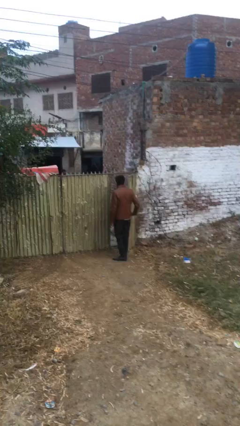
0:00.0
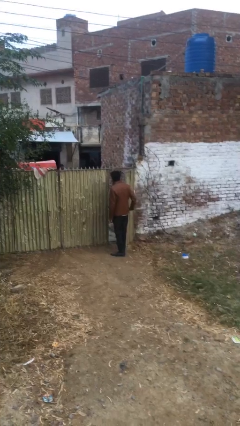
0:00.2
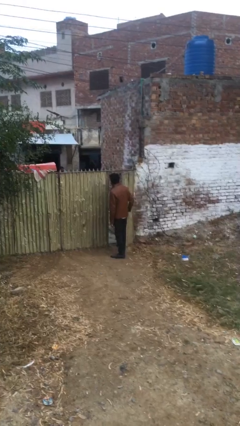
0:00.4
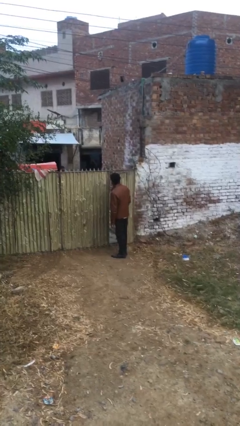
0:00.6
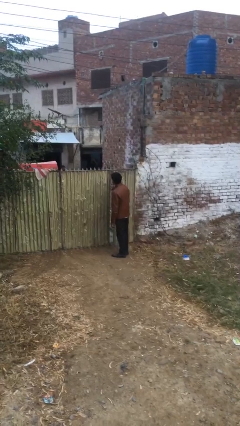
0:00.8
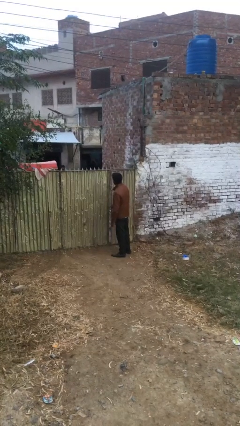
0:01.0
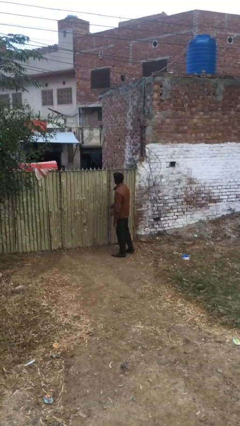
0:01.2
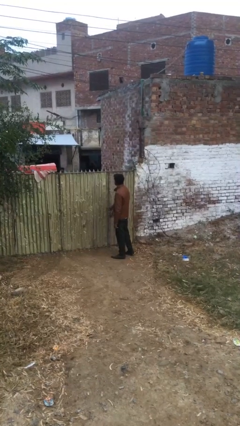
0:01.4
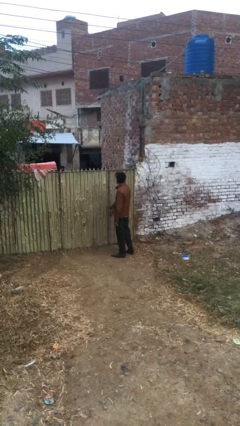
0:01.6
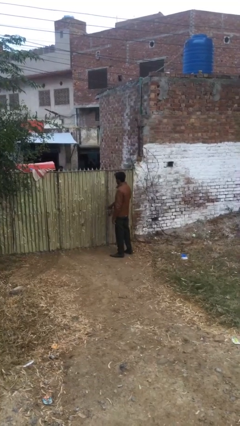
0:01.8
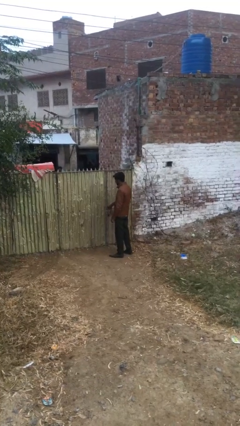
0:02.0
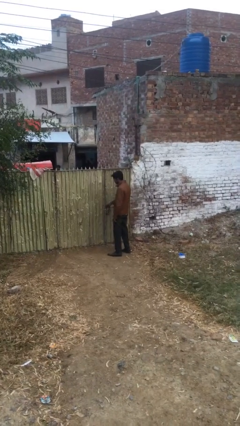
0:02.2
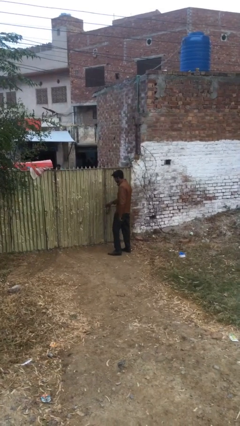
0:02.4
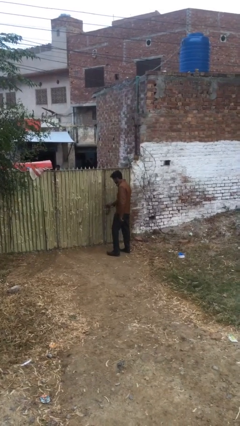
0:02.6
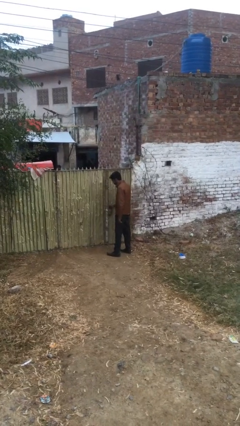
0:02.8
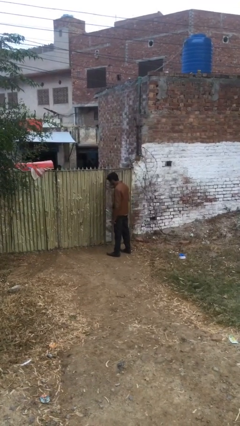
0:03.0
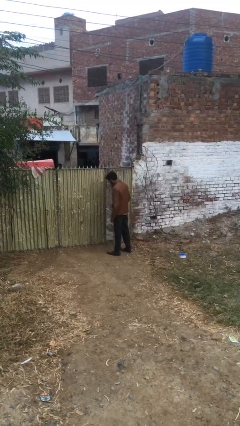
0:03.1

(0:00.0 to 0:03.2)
person closes facility door

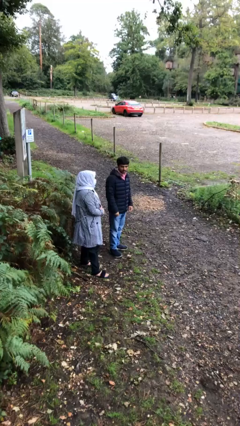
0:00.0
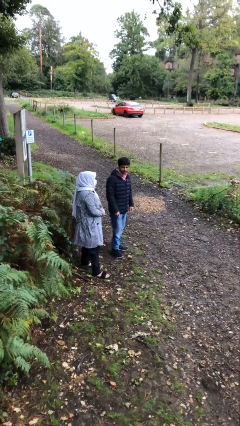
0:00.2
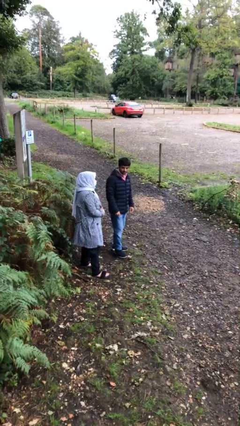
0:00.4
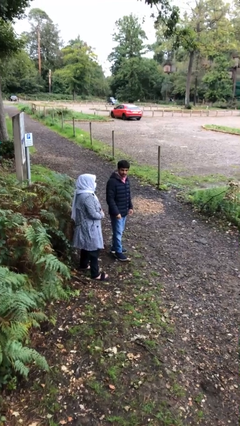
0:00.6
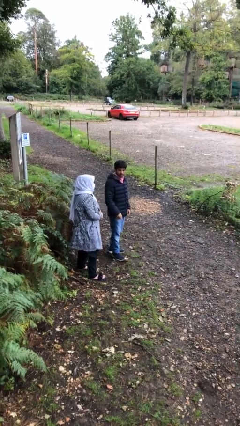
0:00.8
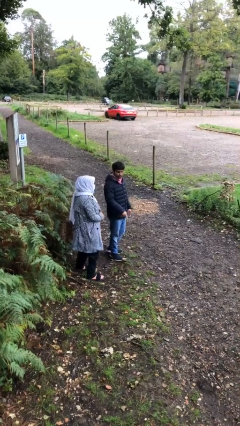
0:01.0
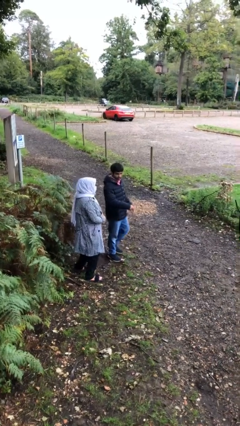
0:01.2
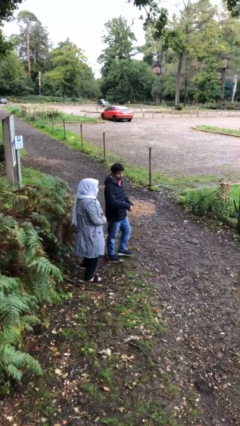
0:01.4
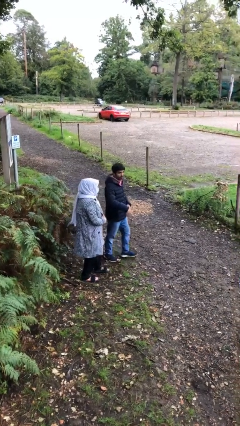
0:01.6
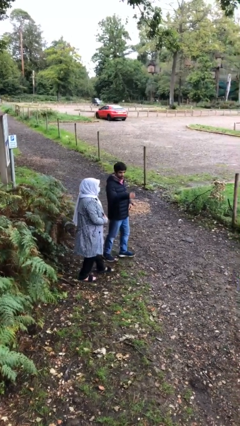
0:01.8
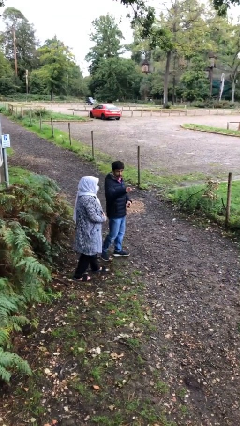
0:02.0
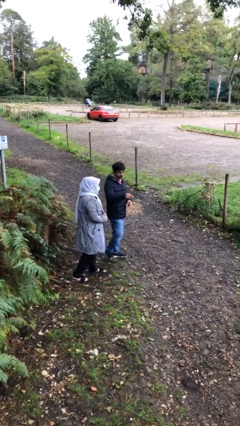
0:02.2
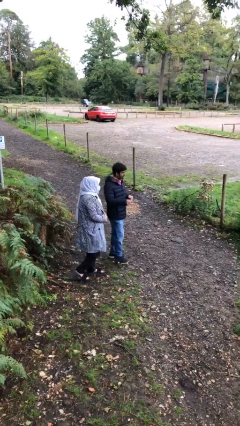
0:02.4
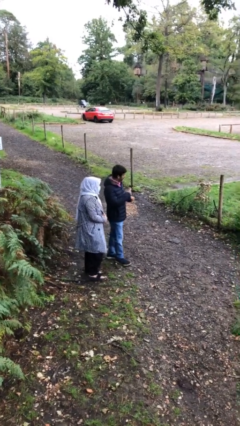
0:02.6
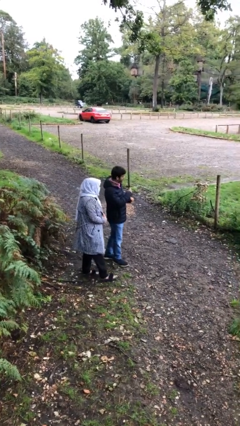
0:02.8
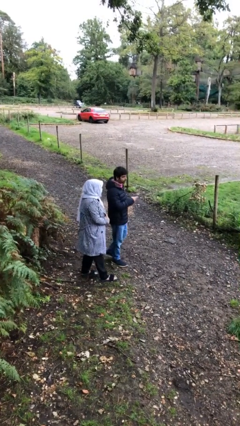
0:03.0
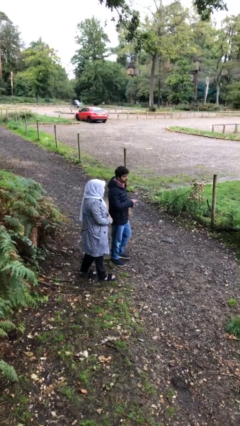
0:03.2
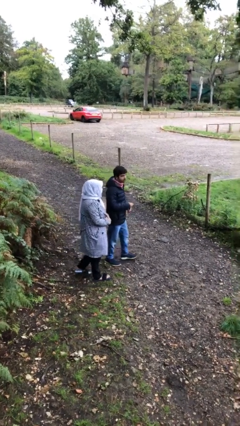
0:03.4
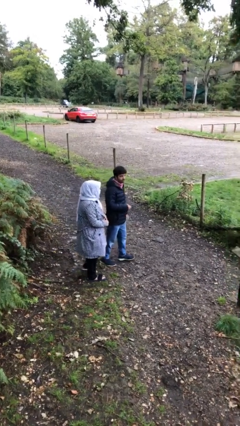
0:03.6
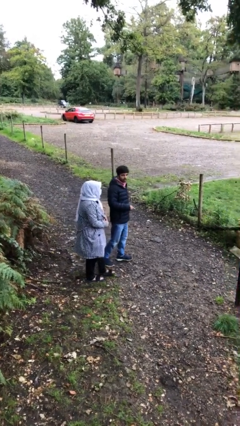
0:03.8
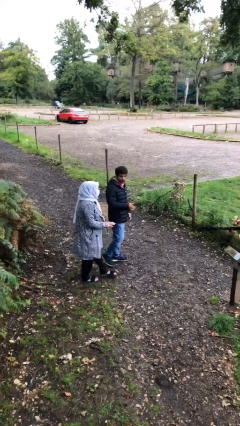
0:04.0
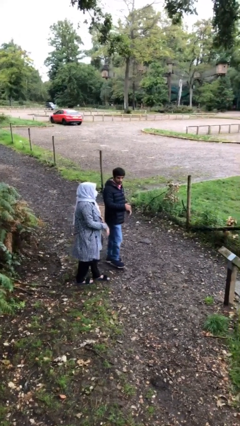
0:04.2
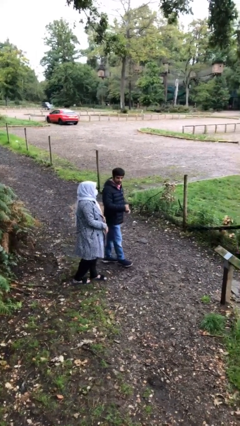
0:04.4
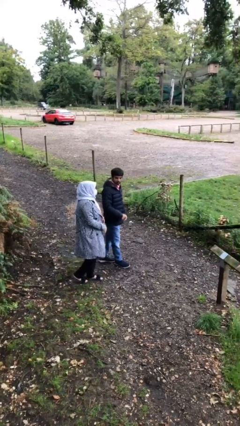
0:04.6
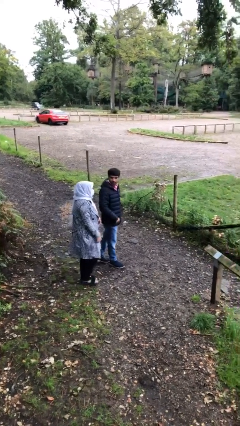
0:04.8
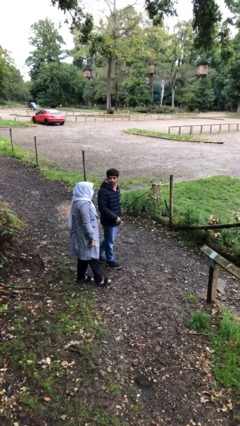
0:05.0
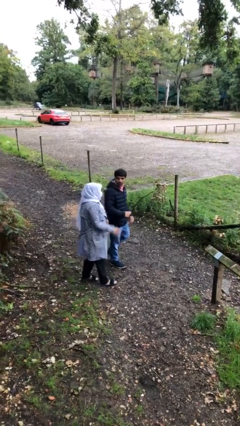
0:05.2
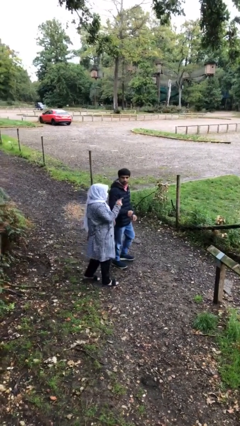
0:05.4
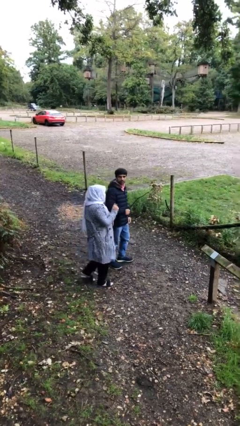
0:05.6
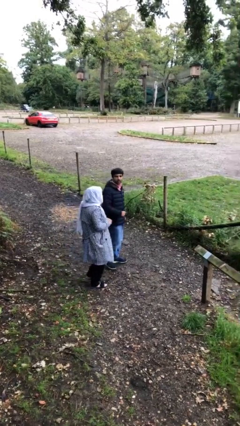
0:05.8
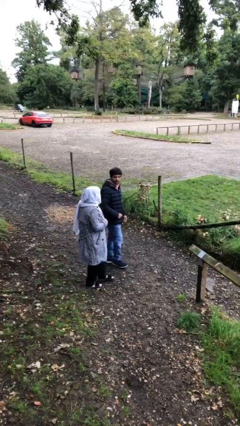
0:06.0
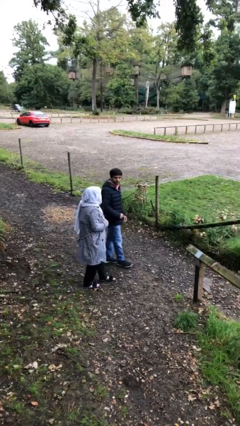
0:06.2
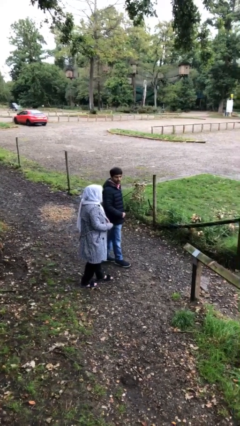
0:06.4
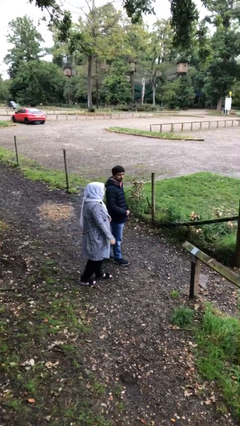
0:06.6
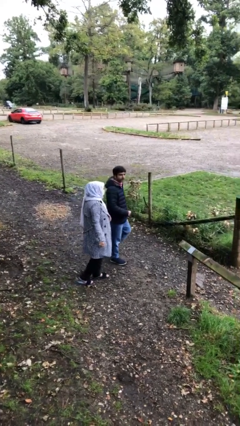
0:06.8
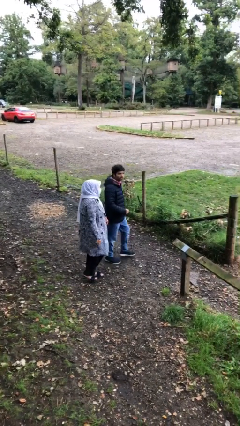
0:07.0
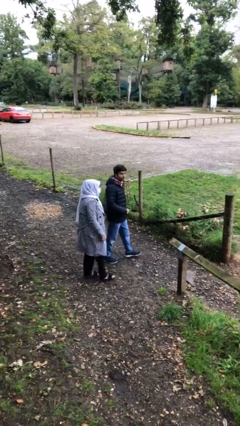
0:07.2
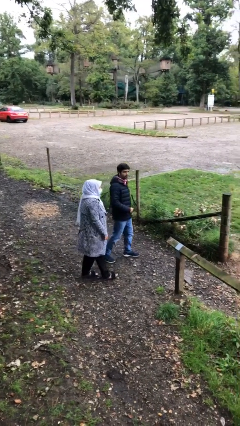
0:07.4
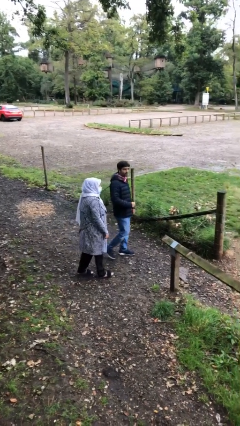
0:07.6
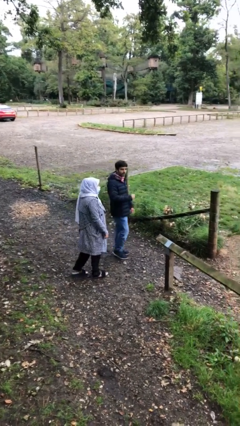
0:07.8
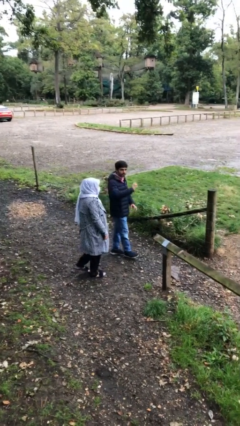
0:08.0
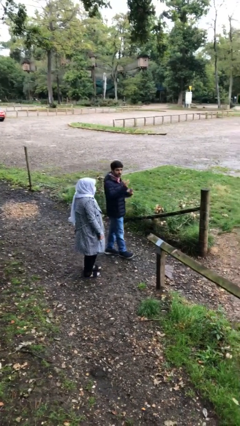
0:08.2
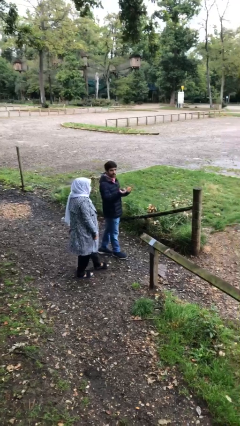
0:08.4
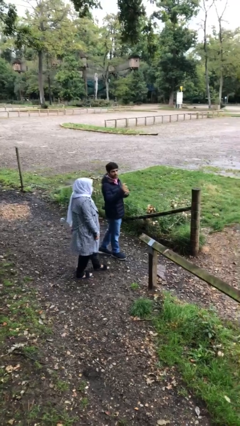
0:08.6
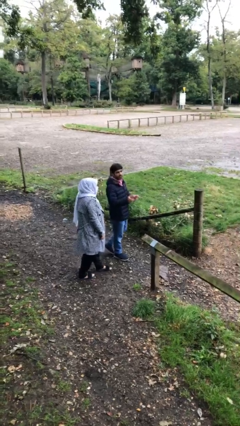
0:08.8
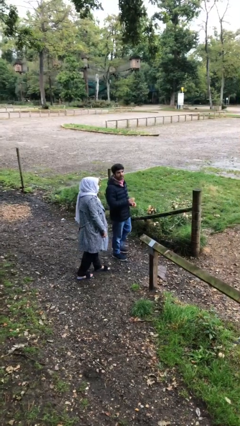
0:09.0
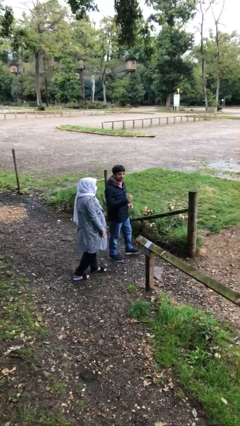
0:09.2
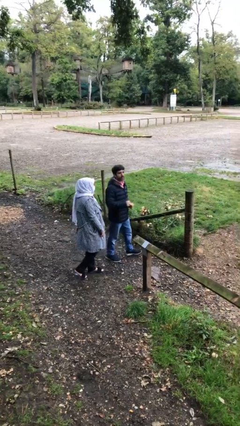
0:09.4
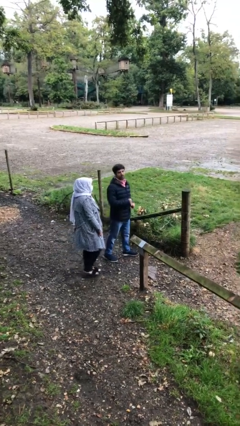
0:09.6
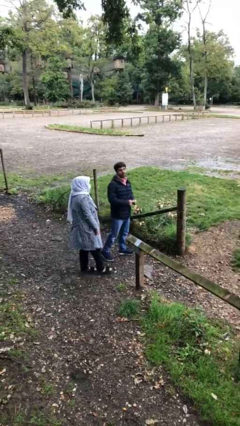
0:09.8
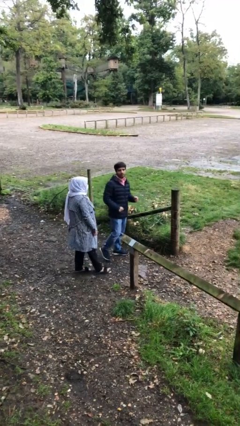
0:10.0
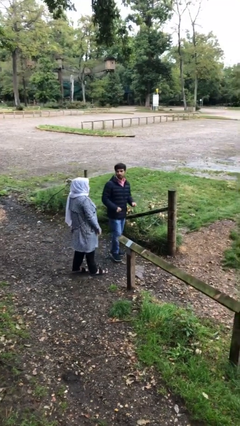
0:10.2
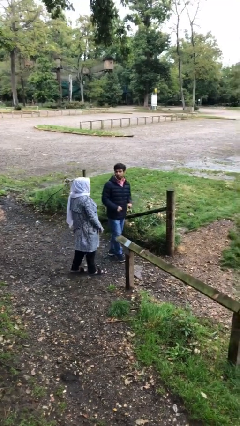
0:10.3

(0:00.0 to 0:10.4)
person talks to person

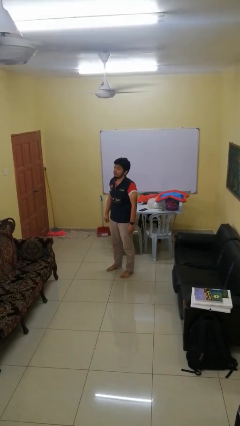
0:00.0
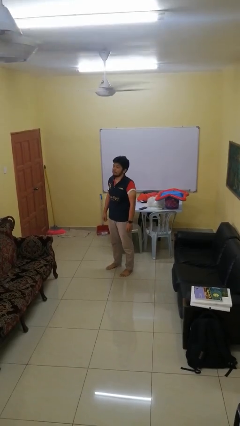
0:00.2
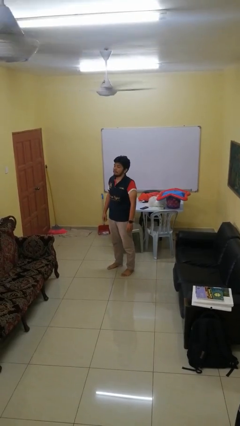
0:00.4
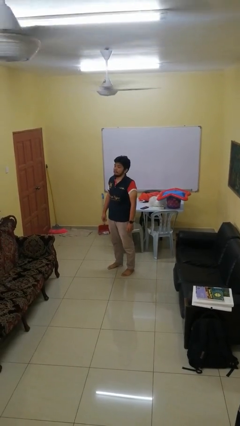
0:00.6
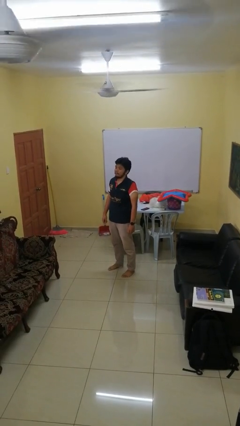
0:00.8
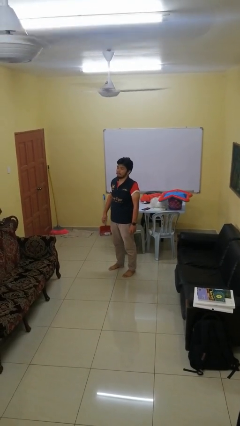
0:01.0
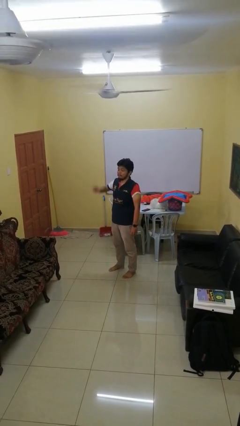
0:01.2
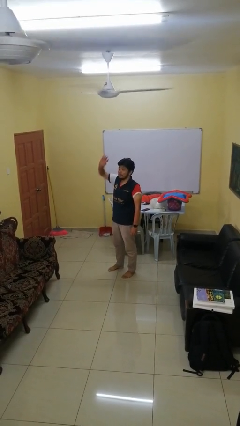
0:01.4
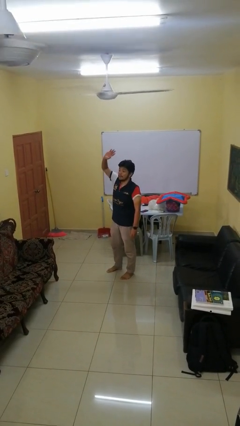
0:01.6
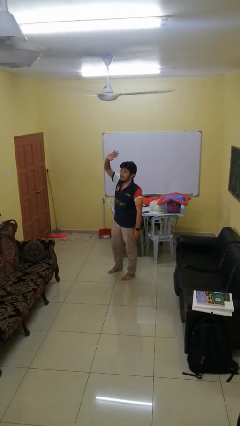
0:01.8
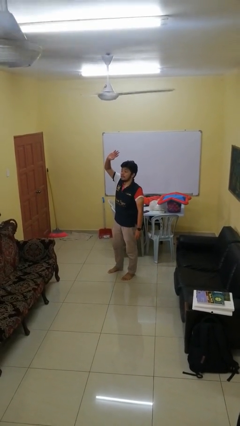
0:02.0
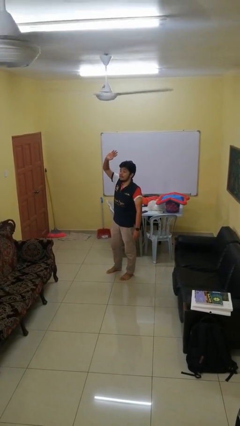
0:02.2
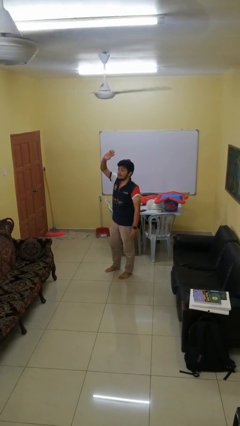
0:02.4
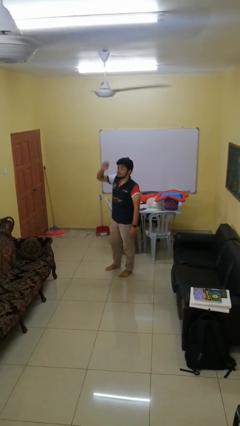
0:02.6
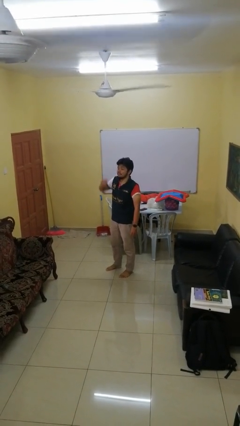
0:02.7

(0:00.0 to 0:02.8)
person gestures raise hand

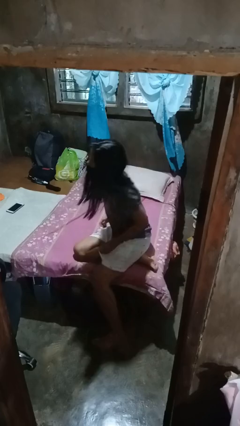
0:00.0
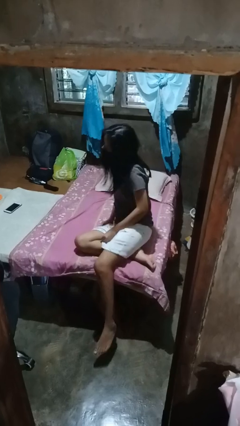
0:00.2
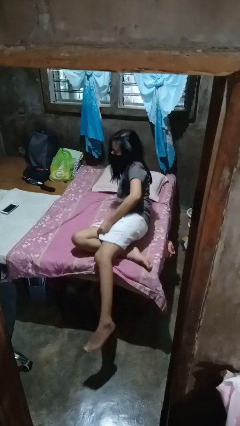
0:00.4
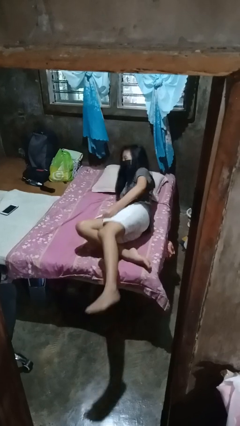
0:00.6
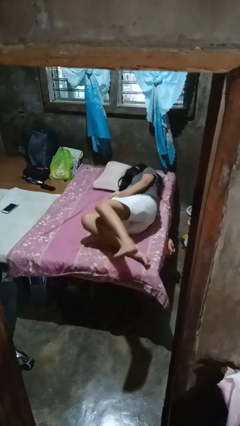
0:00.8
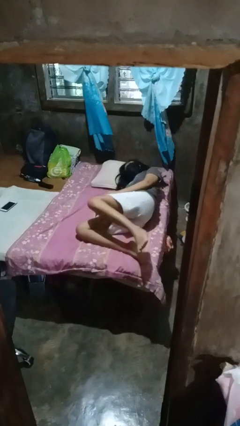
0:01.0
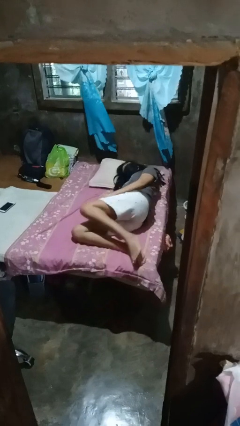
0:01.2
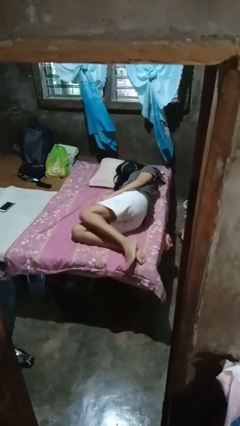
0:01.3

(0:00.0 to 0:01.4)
person lies down on bed

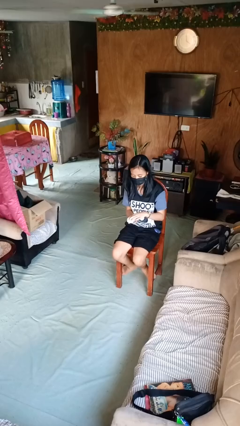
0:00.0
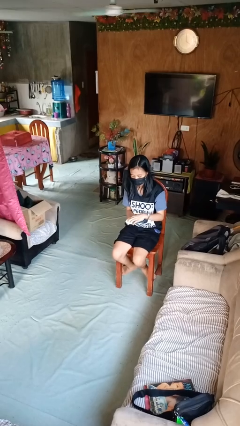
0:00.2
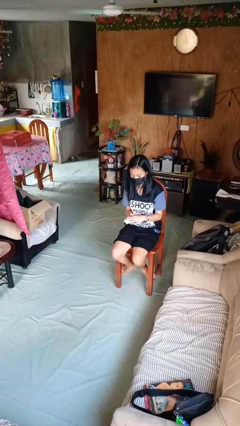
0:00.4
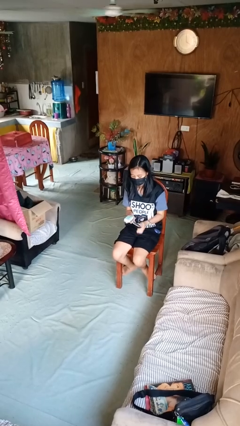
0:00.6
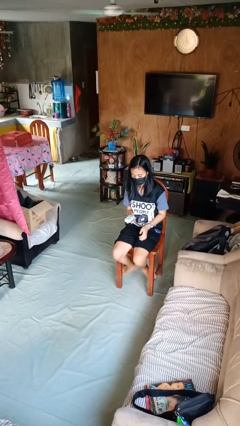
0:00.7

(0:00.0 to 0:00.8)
person closes jewelry box
